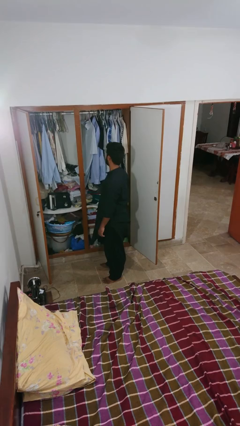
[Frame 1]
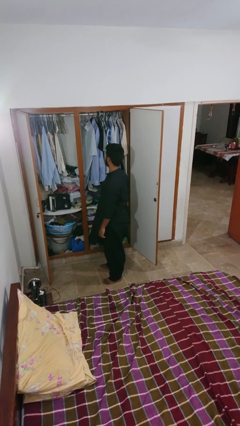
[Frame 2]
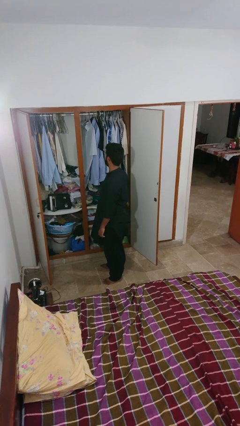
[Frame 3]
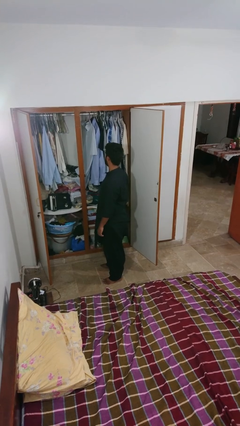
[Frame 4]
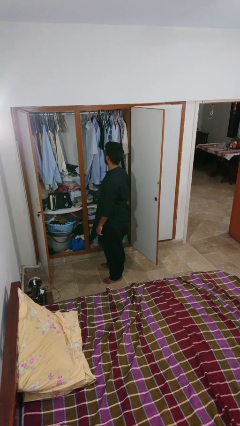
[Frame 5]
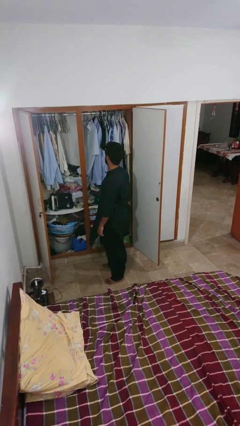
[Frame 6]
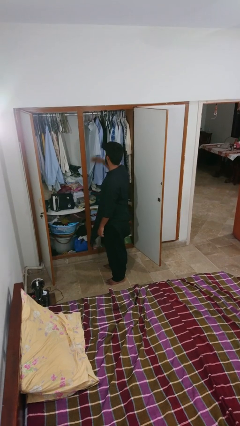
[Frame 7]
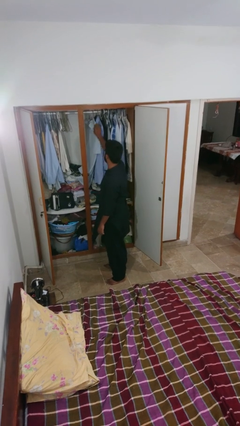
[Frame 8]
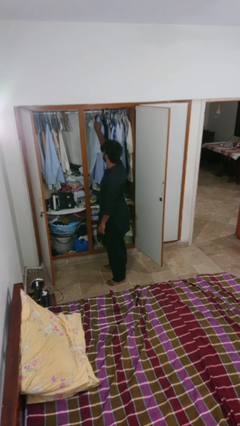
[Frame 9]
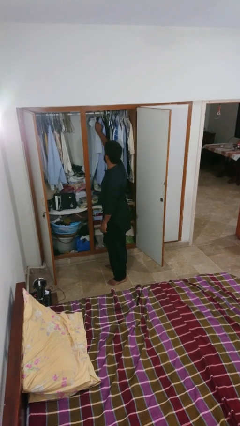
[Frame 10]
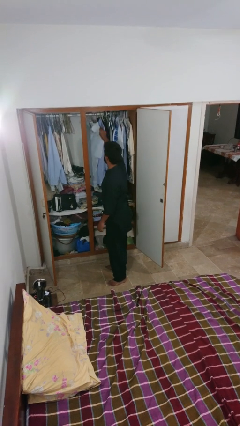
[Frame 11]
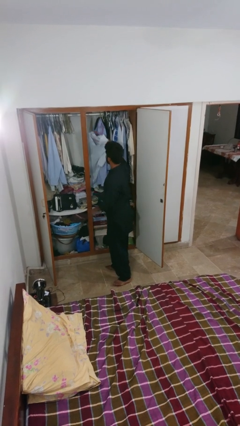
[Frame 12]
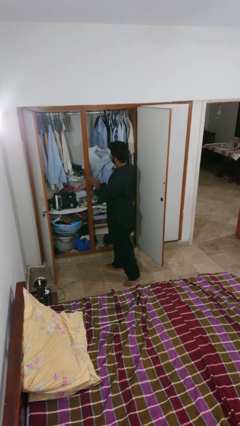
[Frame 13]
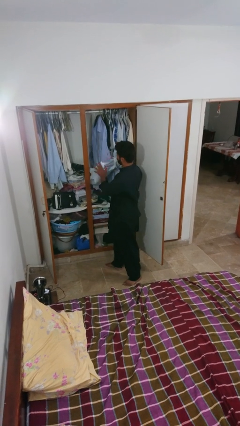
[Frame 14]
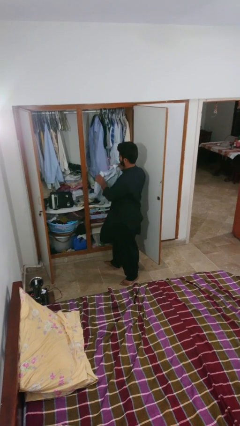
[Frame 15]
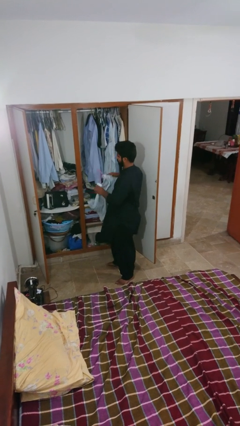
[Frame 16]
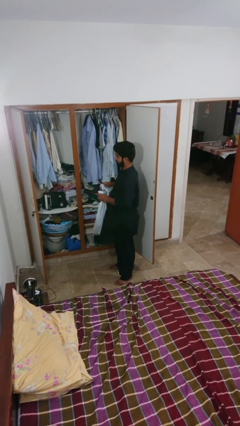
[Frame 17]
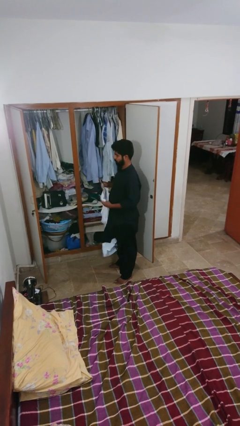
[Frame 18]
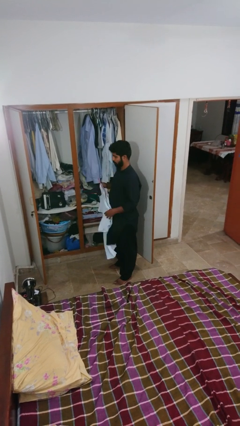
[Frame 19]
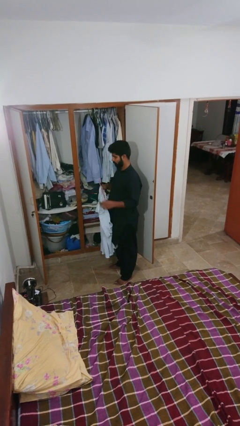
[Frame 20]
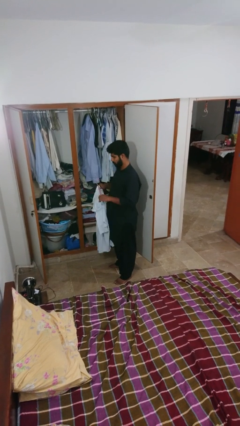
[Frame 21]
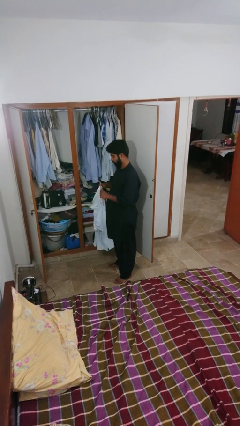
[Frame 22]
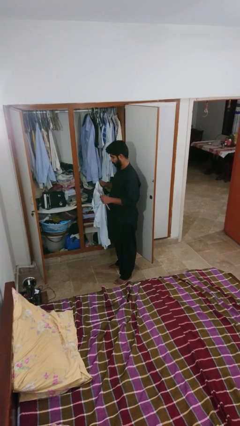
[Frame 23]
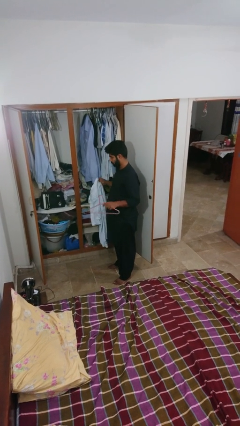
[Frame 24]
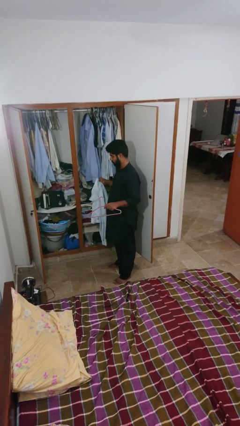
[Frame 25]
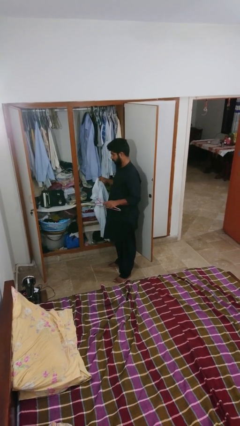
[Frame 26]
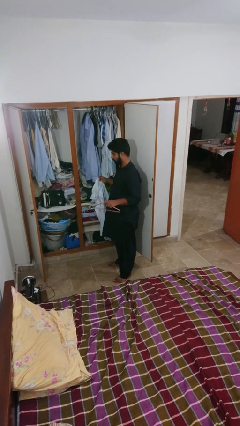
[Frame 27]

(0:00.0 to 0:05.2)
person takes clothes from closet

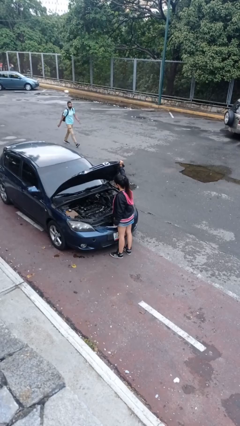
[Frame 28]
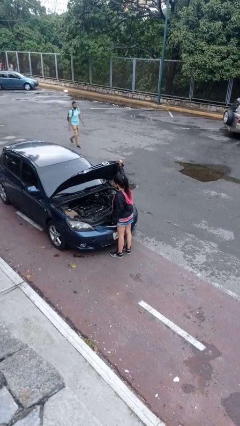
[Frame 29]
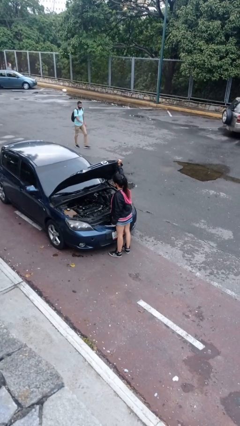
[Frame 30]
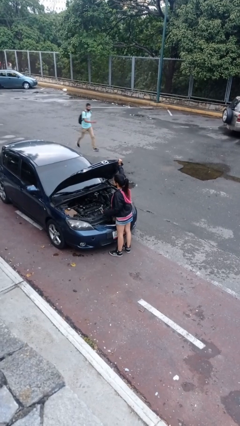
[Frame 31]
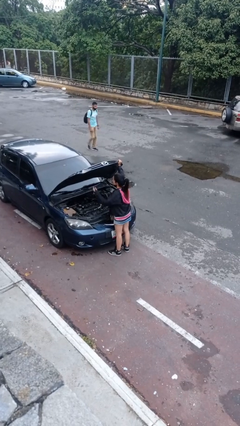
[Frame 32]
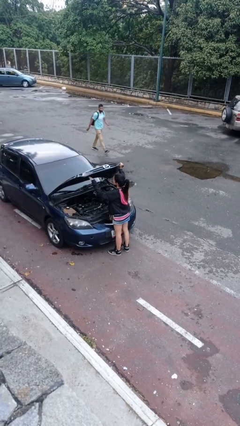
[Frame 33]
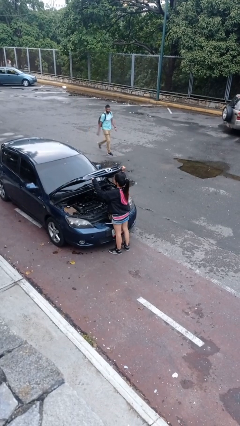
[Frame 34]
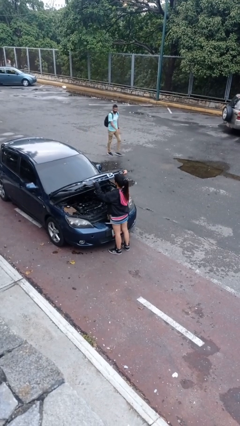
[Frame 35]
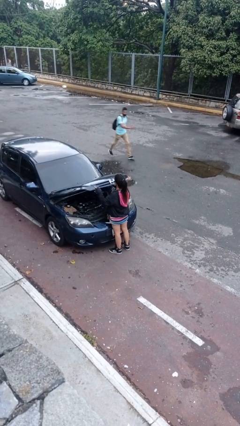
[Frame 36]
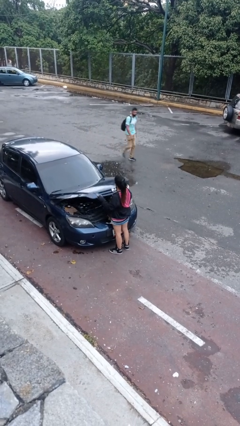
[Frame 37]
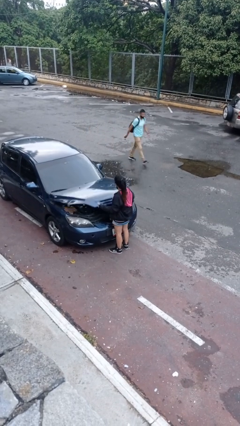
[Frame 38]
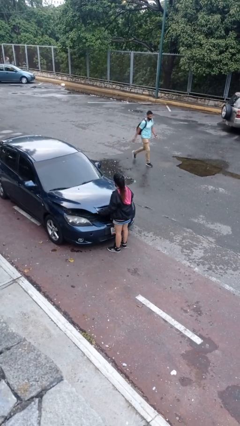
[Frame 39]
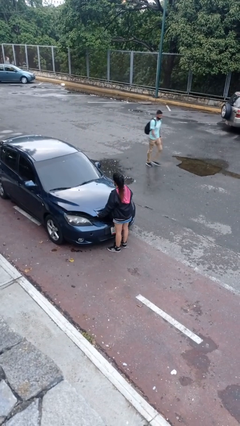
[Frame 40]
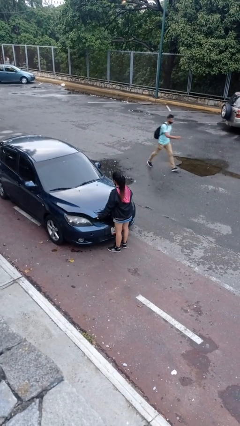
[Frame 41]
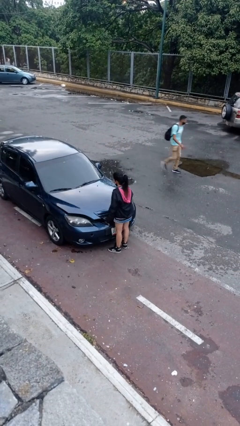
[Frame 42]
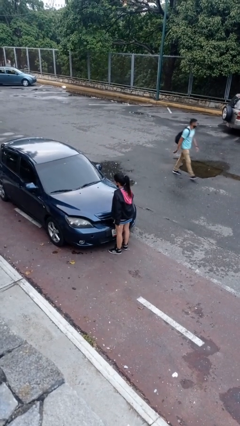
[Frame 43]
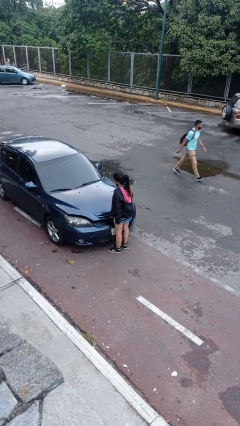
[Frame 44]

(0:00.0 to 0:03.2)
person closes car hood

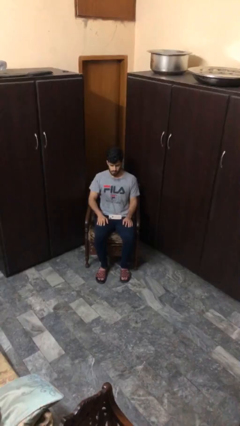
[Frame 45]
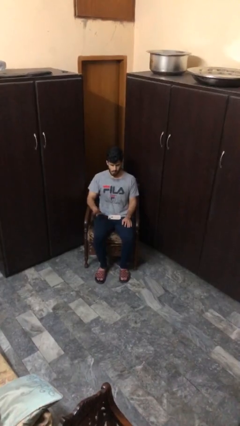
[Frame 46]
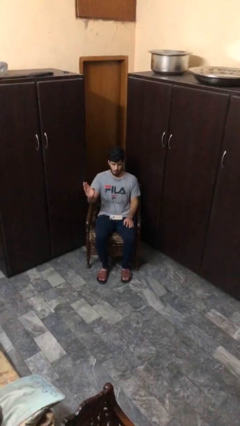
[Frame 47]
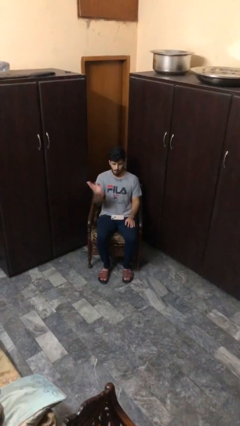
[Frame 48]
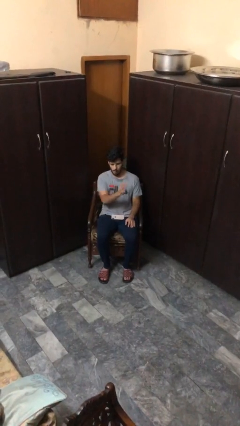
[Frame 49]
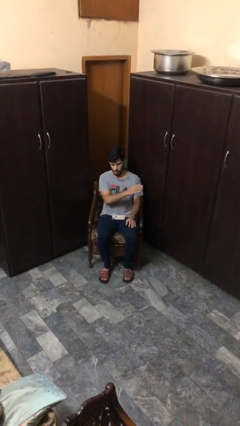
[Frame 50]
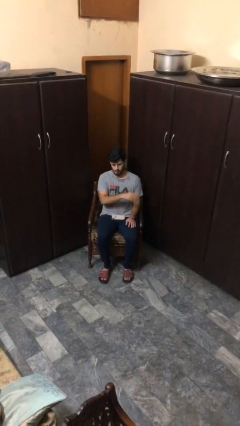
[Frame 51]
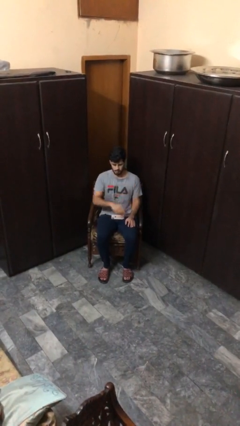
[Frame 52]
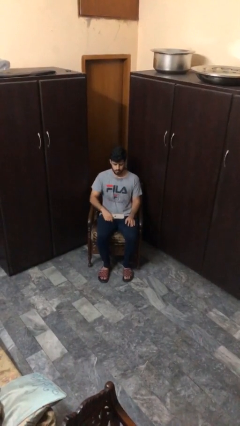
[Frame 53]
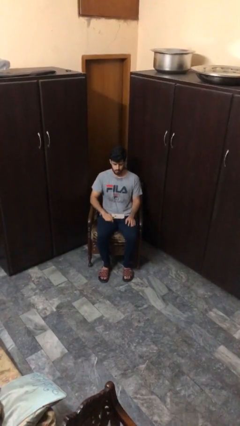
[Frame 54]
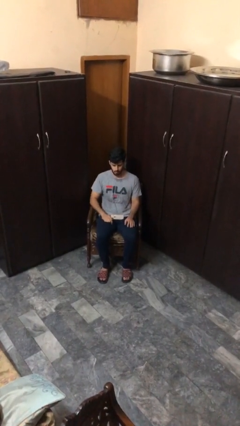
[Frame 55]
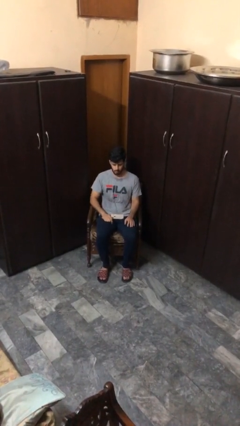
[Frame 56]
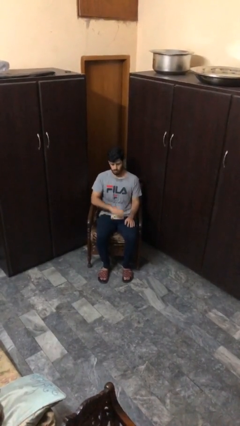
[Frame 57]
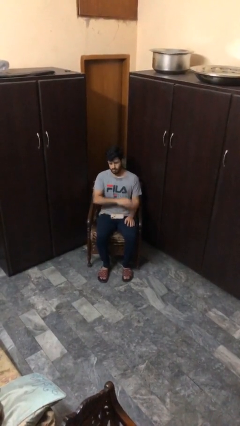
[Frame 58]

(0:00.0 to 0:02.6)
person gestures swipe left

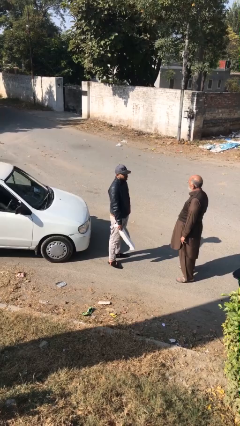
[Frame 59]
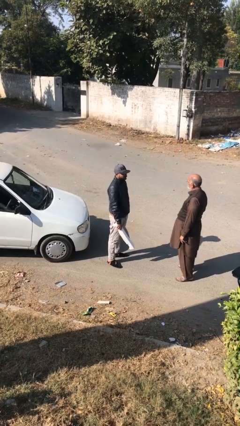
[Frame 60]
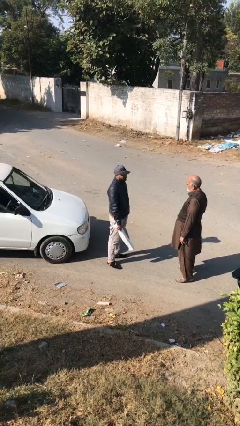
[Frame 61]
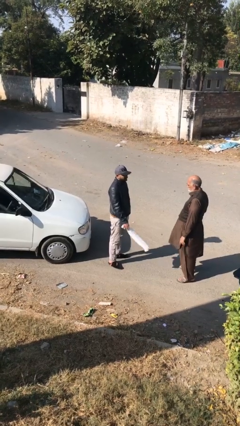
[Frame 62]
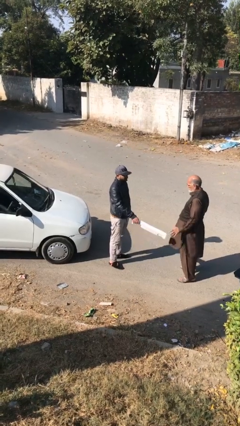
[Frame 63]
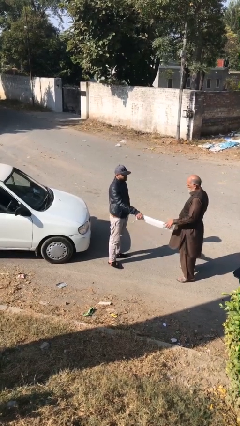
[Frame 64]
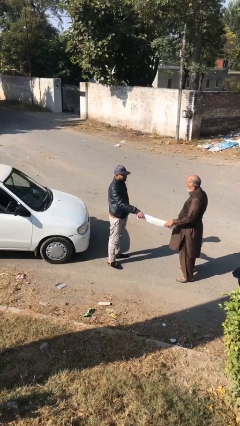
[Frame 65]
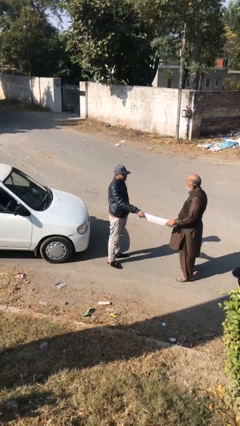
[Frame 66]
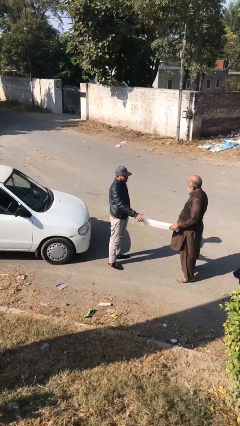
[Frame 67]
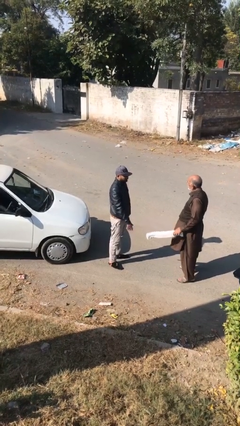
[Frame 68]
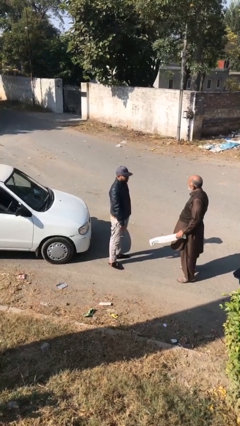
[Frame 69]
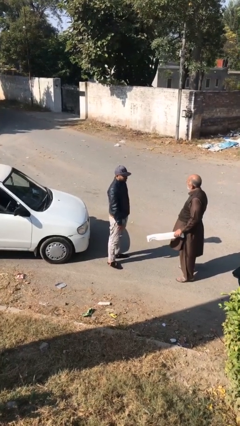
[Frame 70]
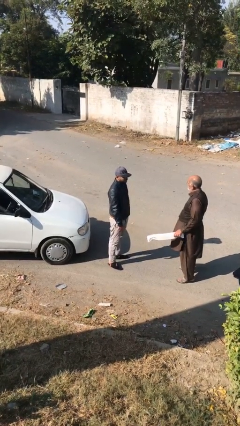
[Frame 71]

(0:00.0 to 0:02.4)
person transfers object to person

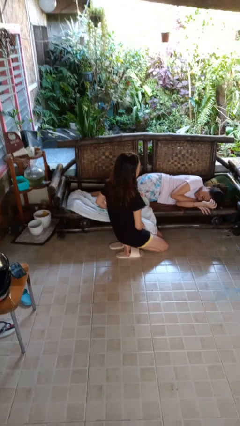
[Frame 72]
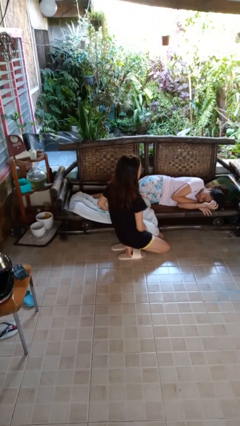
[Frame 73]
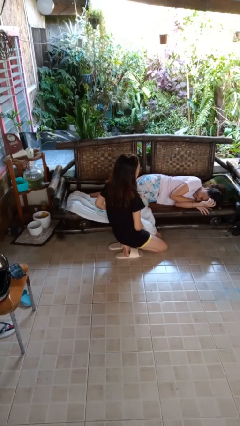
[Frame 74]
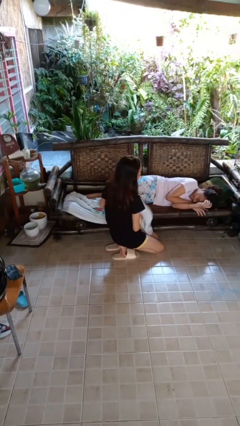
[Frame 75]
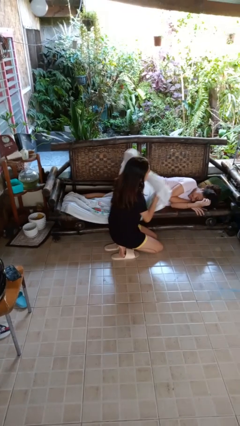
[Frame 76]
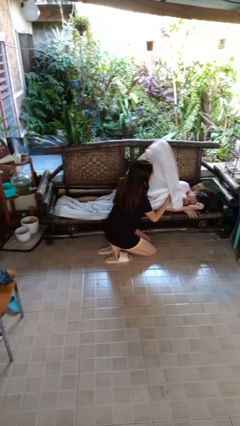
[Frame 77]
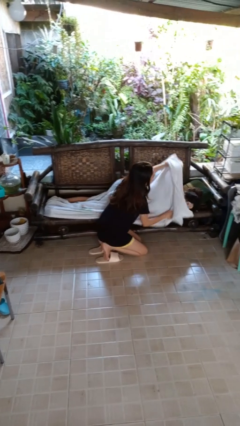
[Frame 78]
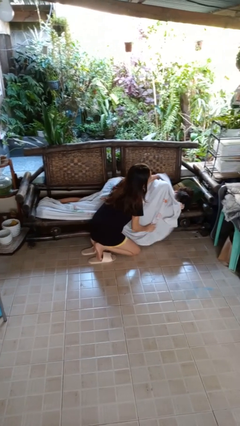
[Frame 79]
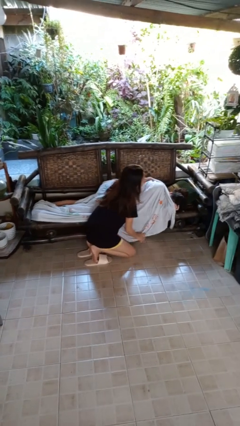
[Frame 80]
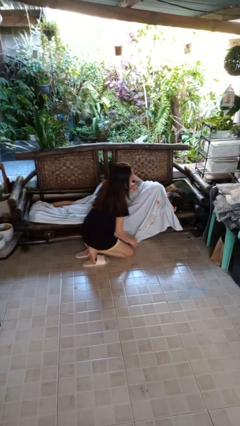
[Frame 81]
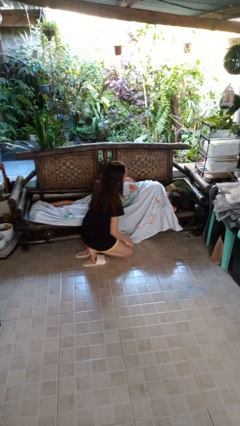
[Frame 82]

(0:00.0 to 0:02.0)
person covers friend with blanket

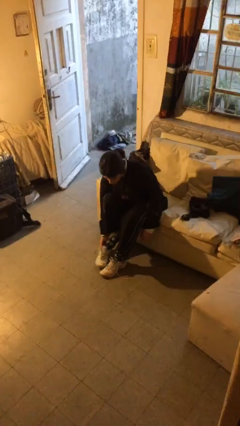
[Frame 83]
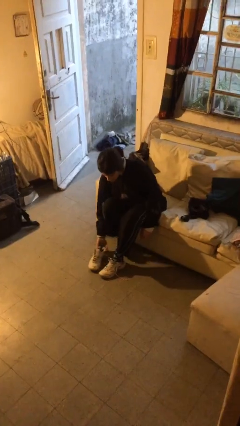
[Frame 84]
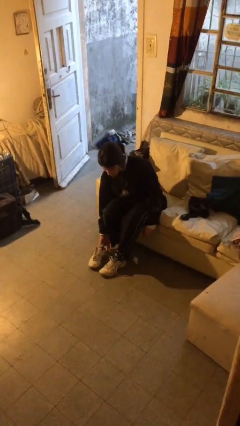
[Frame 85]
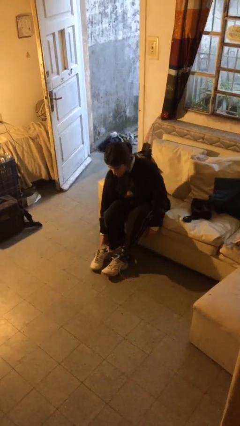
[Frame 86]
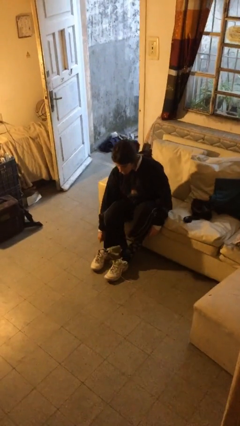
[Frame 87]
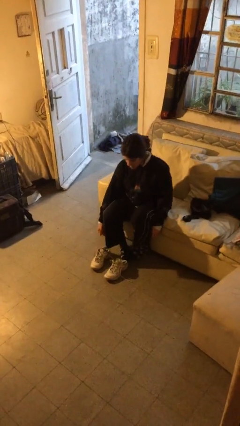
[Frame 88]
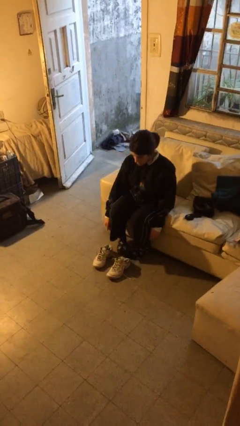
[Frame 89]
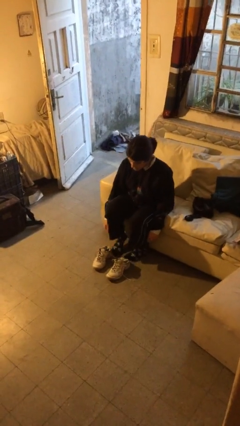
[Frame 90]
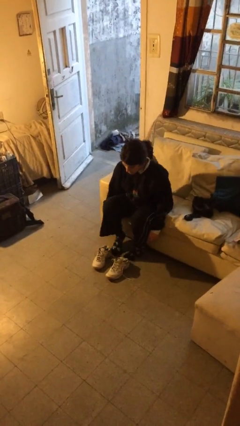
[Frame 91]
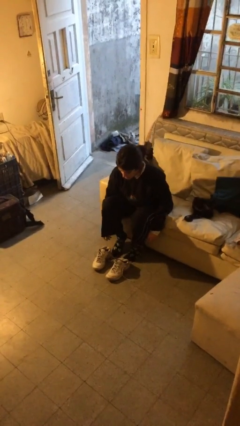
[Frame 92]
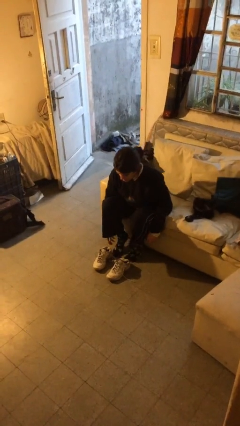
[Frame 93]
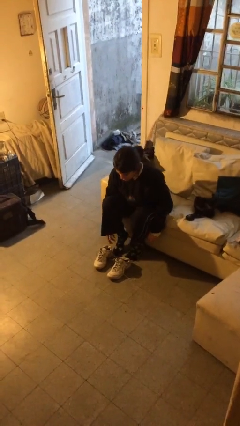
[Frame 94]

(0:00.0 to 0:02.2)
person takes off shoes
